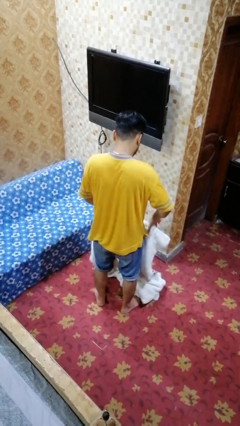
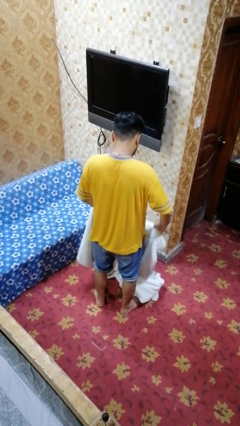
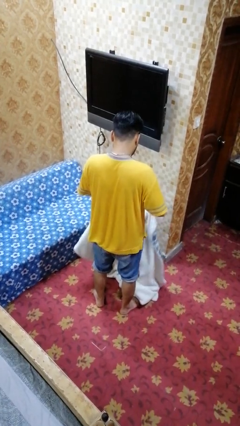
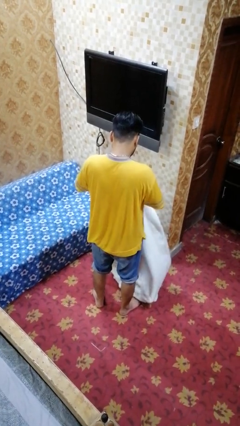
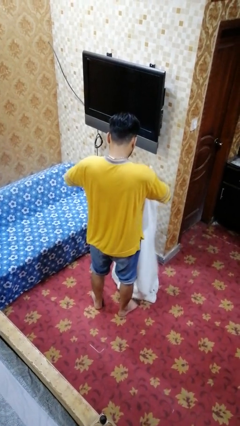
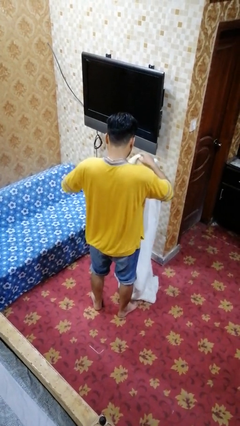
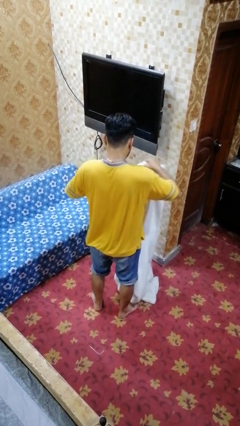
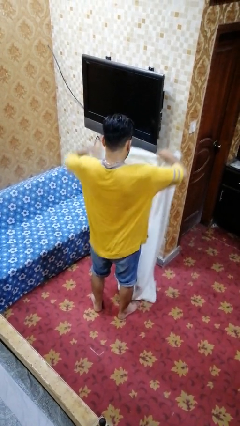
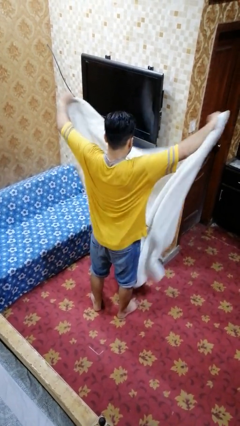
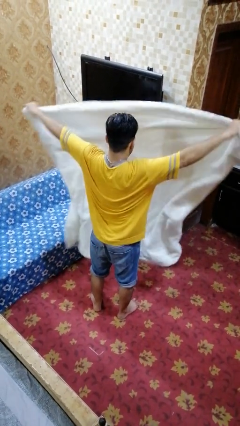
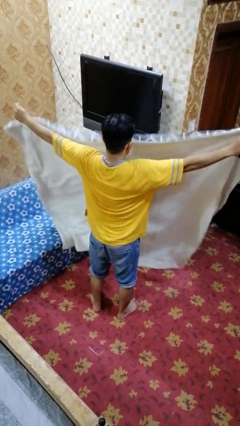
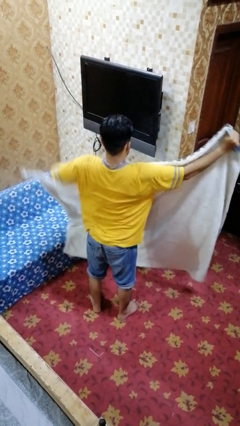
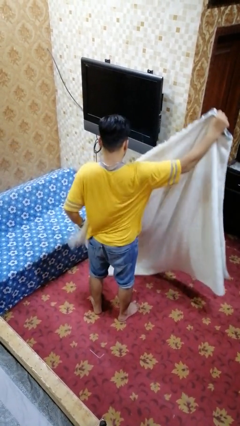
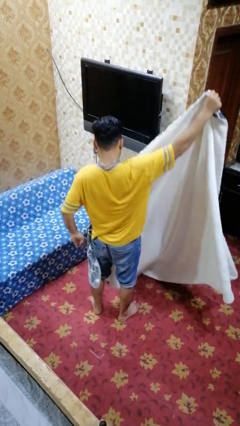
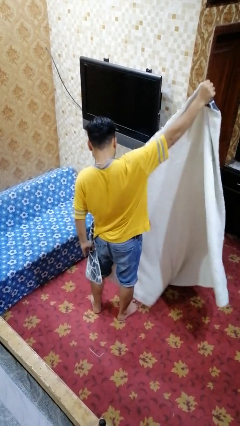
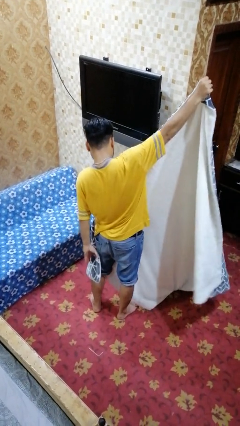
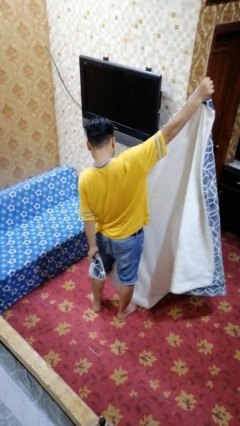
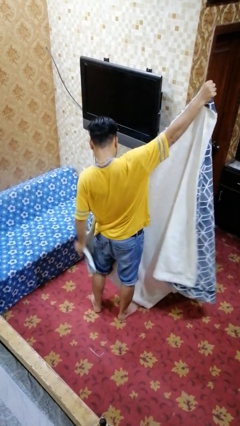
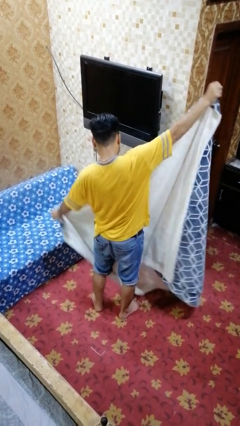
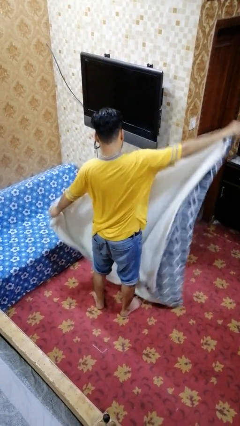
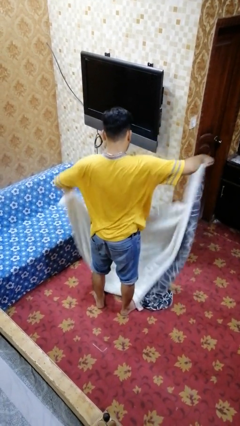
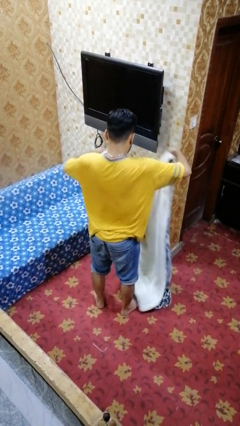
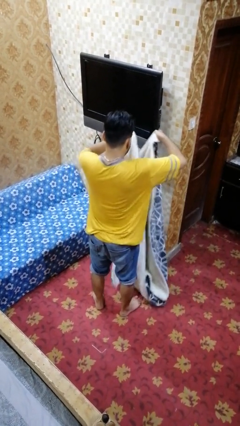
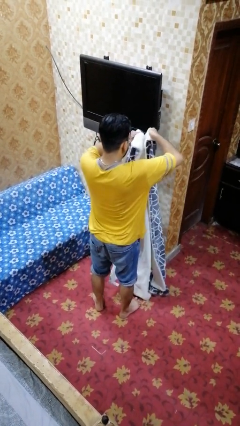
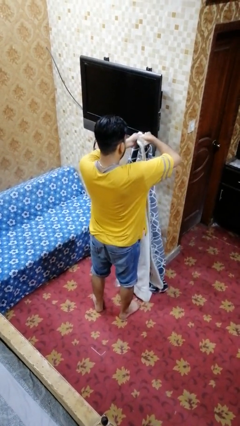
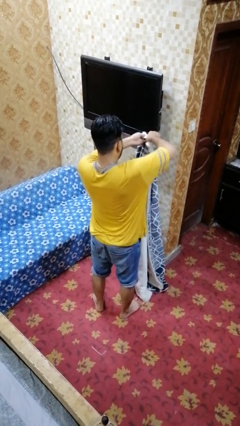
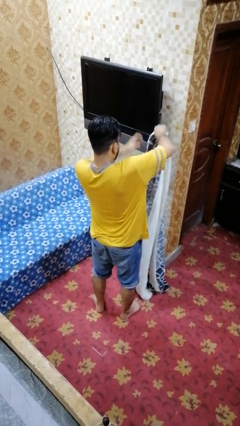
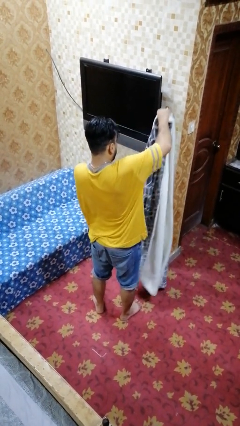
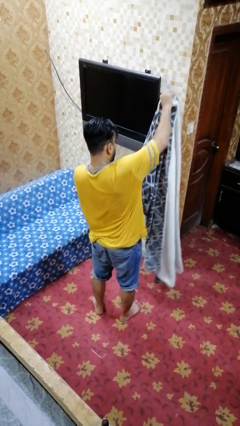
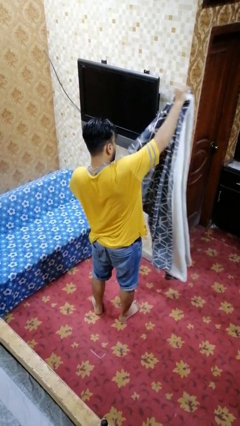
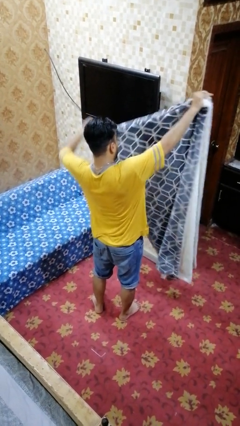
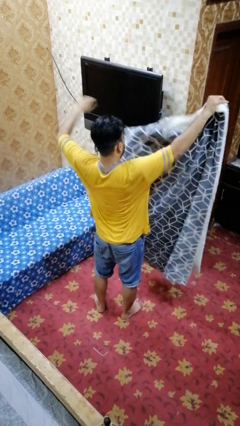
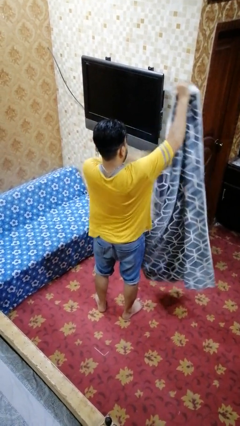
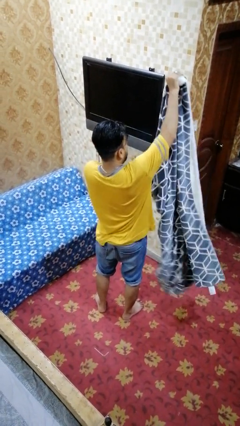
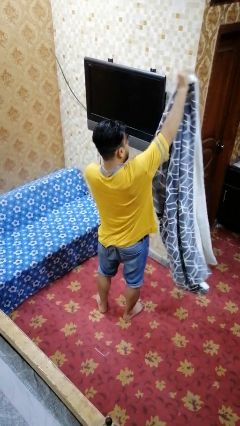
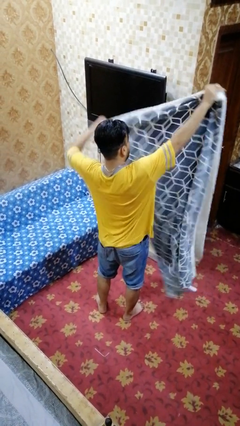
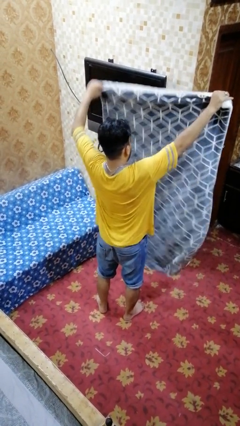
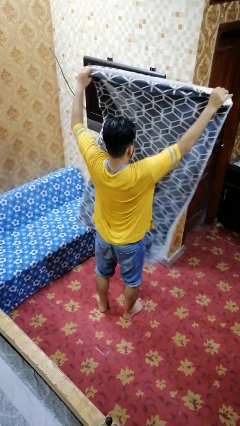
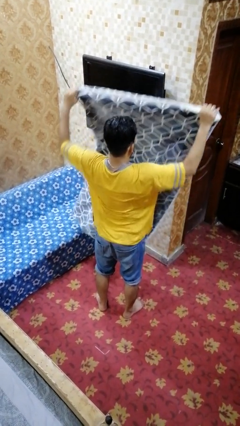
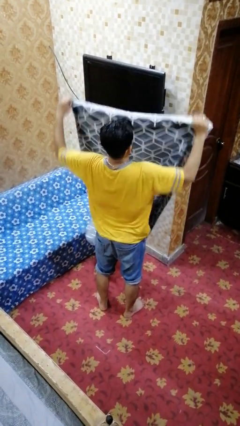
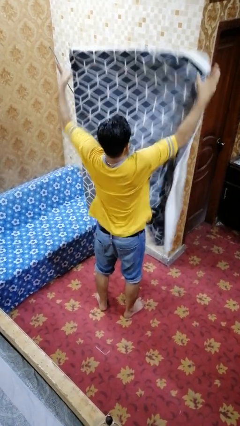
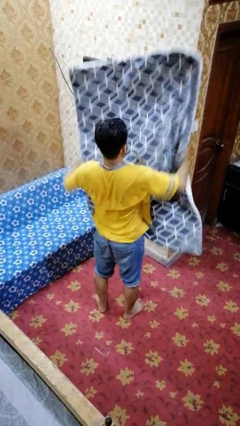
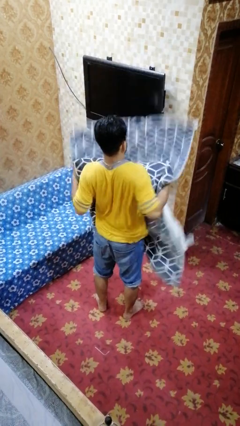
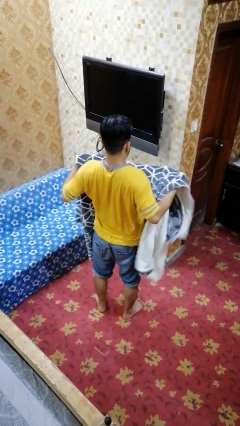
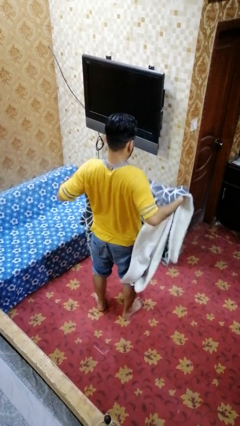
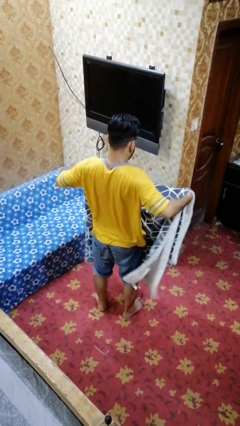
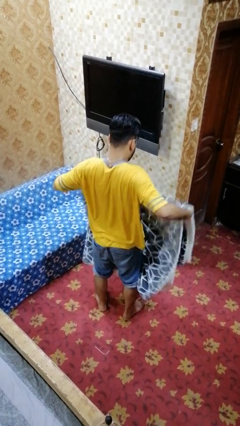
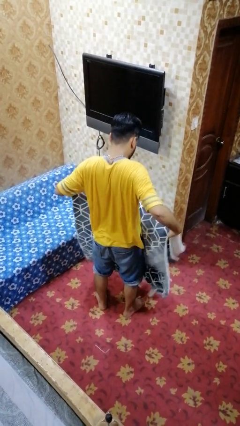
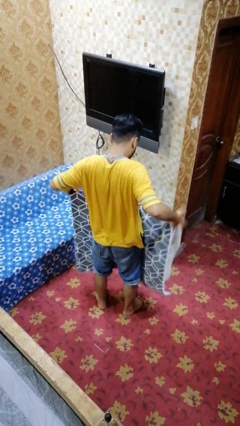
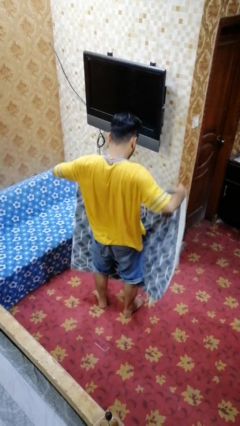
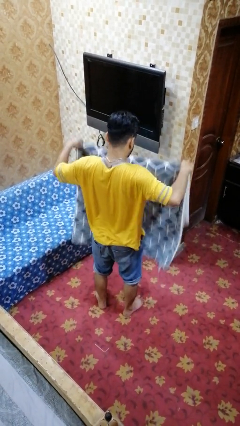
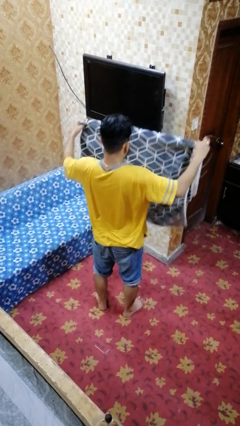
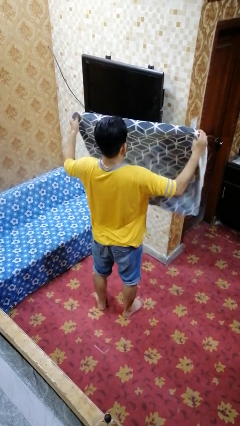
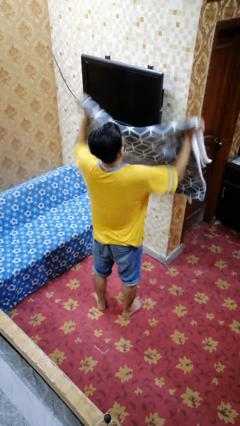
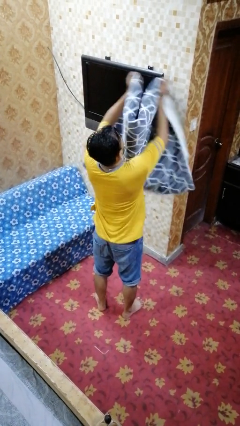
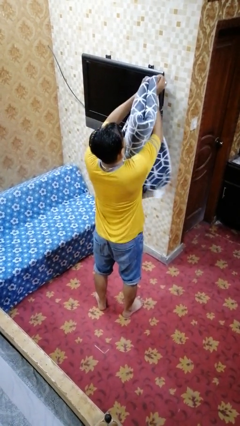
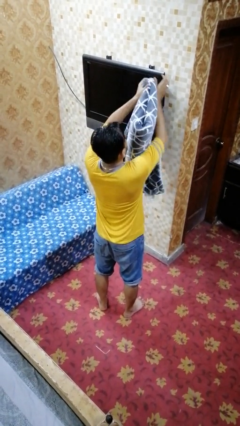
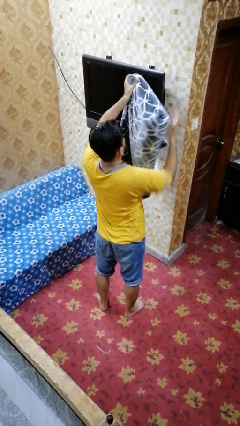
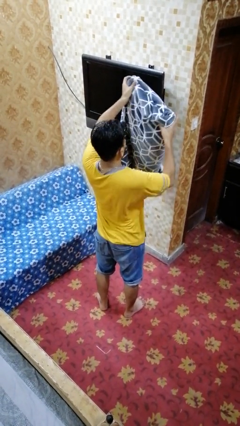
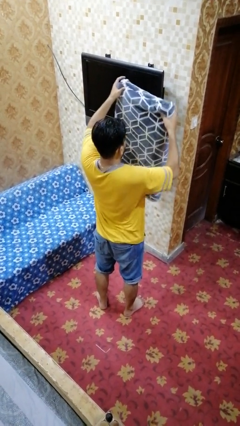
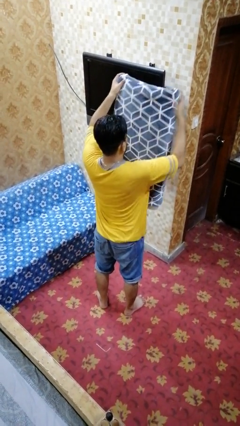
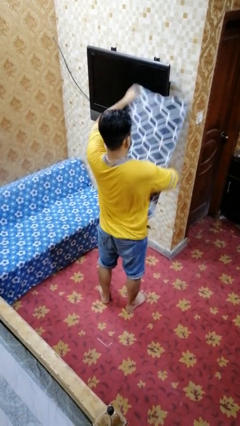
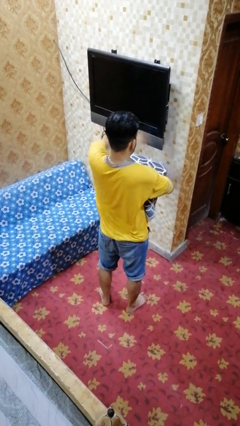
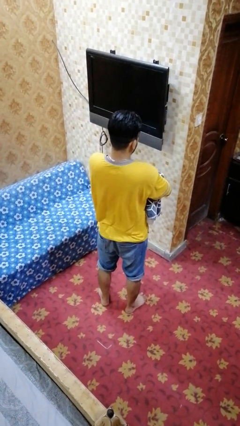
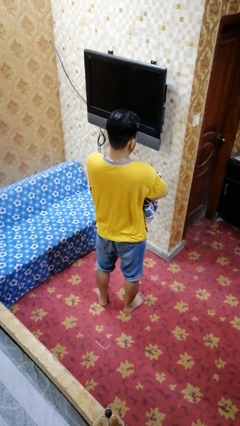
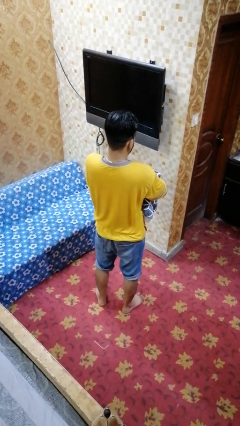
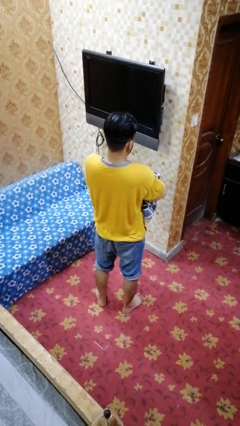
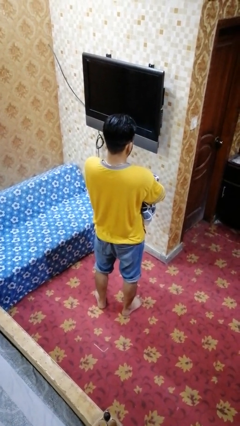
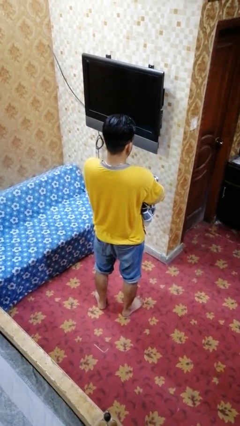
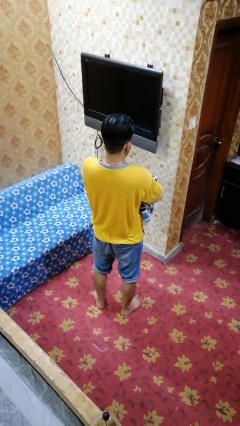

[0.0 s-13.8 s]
person folds blanket

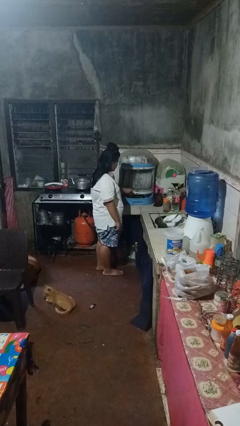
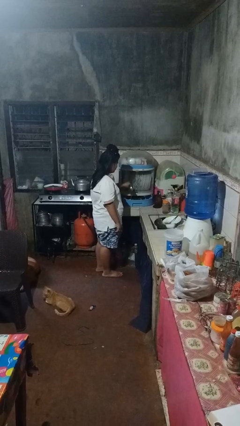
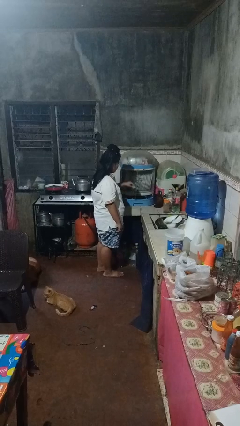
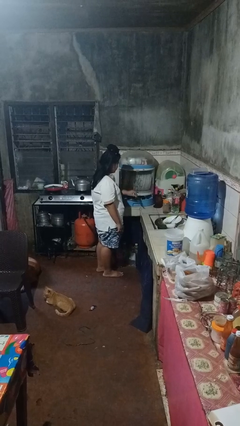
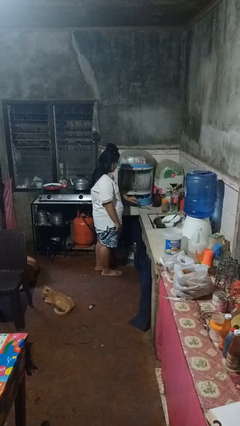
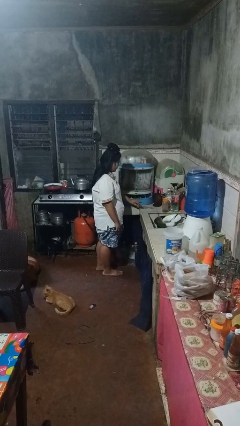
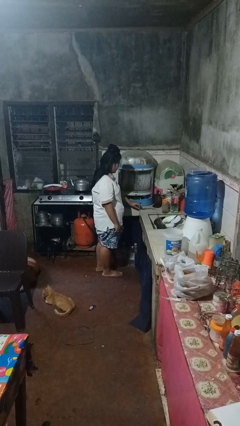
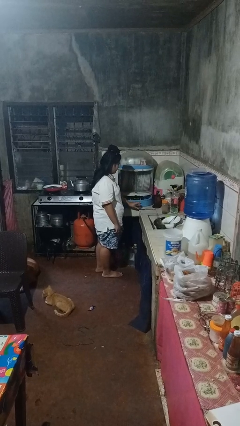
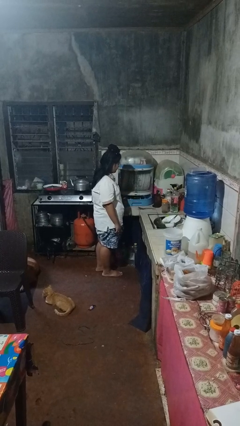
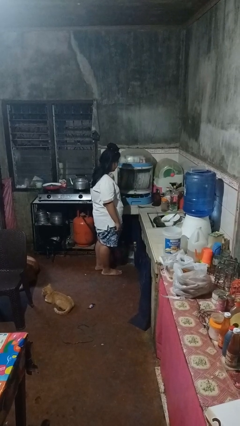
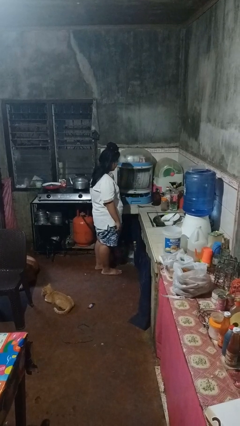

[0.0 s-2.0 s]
person takes object from kitchen drawer

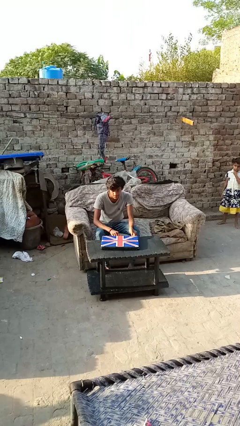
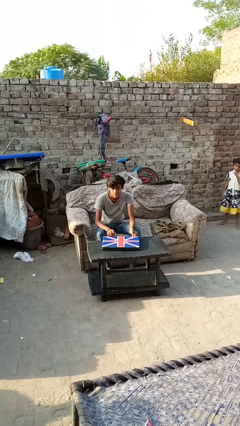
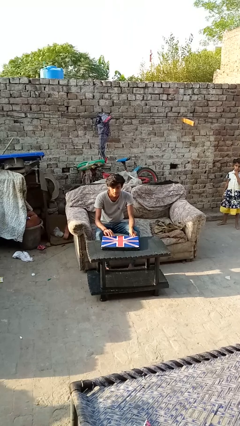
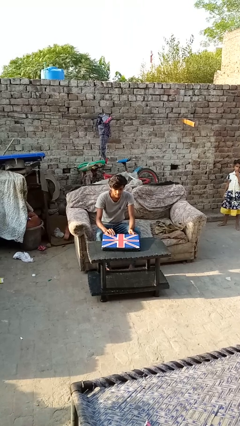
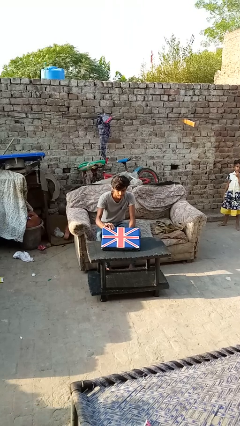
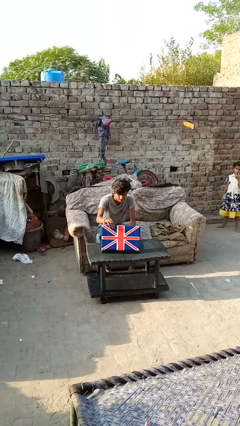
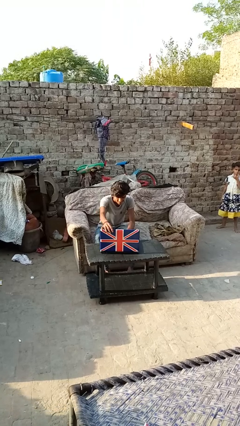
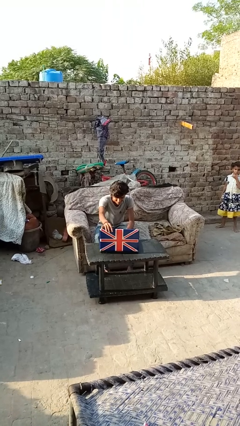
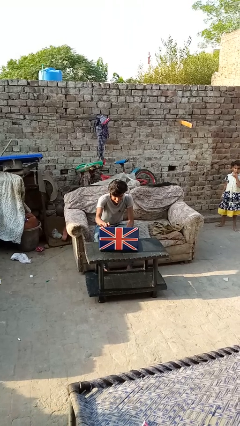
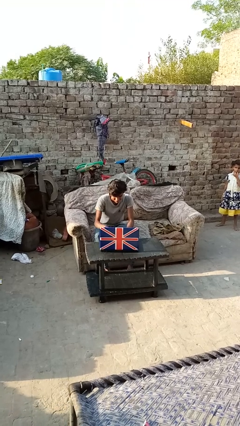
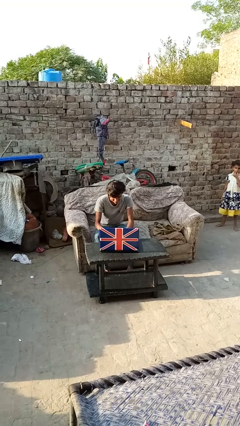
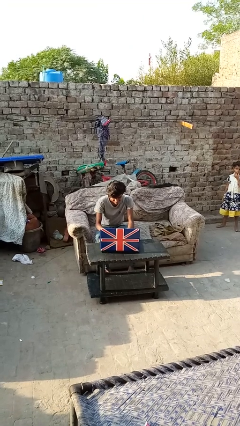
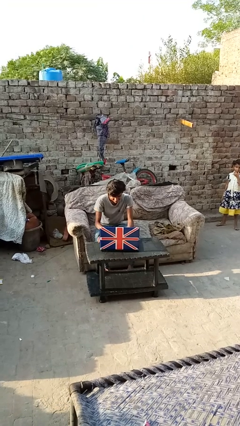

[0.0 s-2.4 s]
person opens laptop
